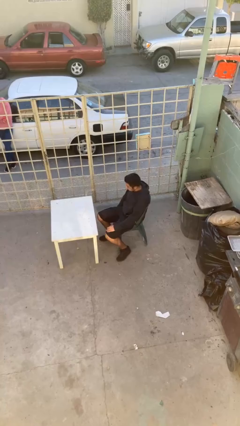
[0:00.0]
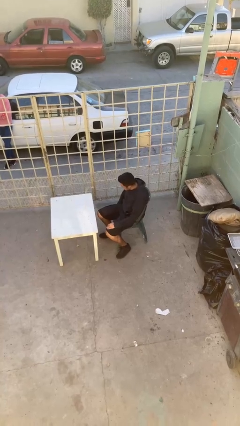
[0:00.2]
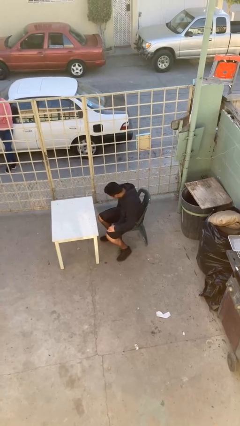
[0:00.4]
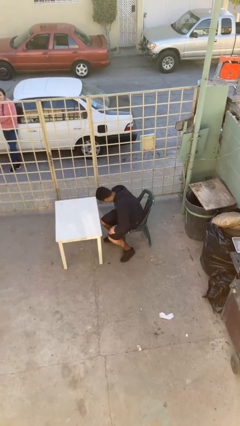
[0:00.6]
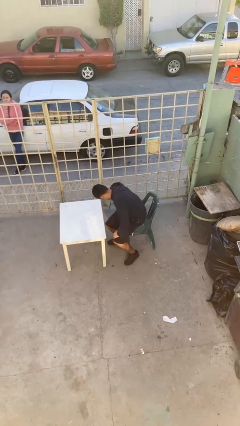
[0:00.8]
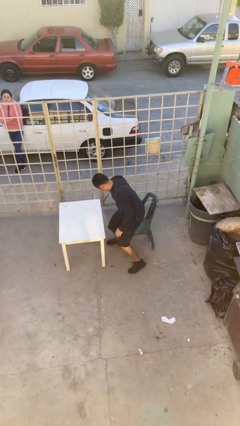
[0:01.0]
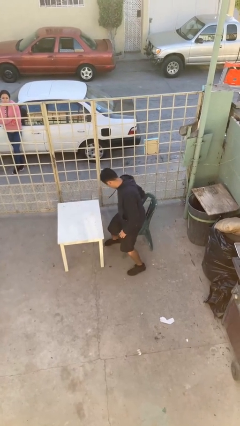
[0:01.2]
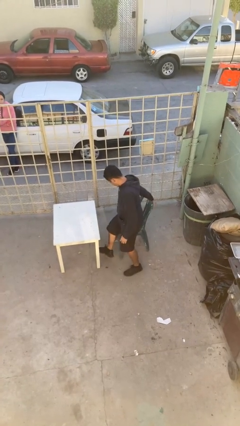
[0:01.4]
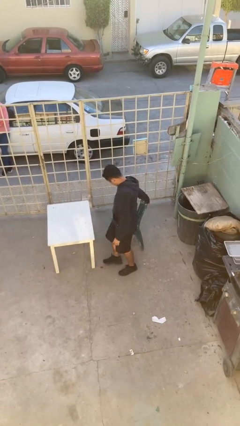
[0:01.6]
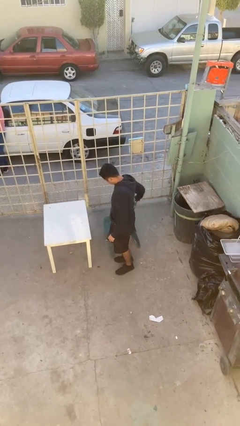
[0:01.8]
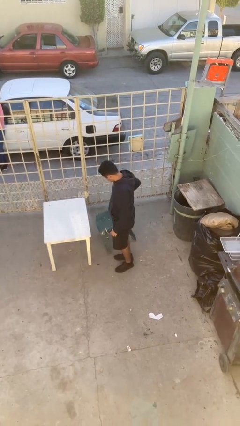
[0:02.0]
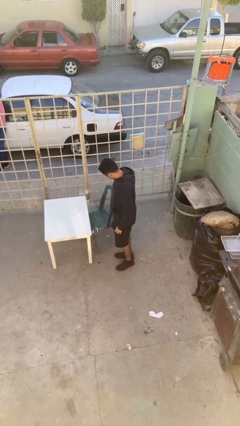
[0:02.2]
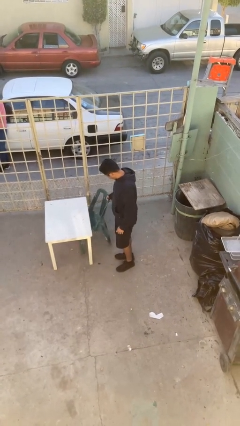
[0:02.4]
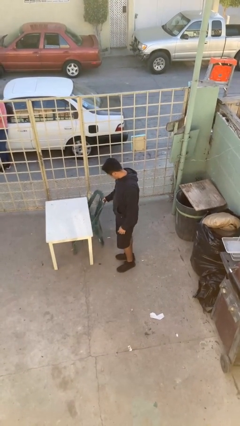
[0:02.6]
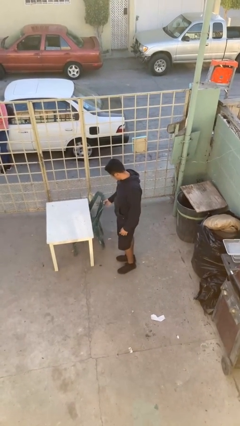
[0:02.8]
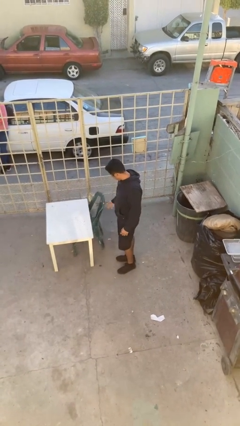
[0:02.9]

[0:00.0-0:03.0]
person stands up

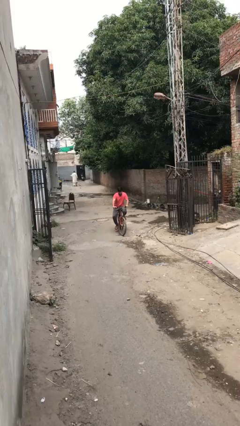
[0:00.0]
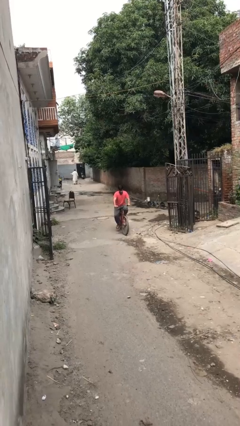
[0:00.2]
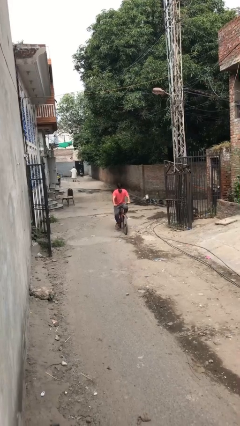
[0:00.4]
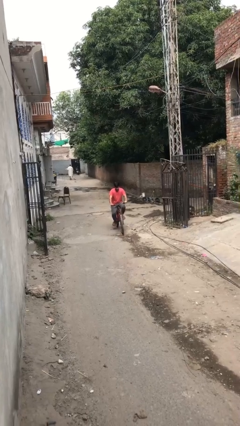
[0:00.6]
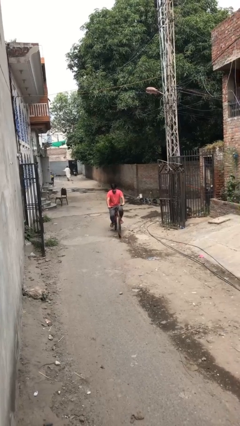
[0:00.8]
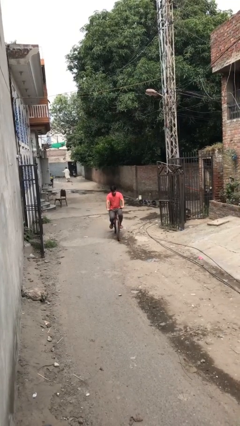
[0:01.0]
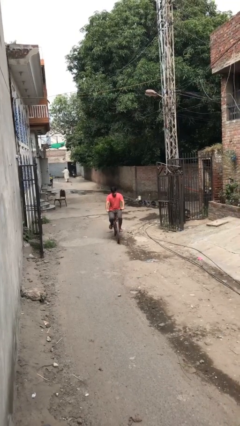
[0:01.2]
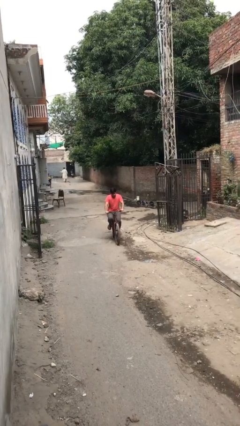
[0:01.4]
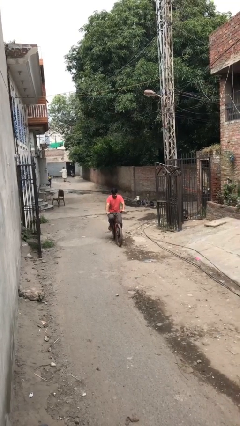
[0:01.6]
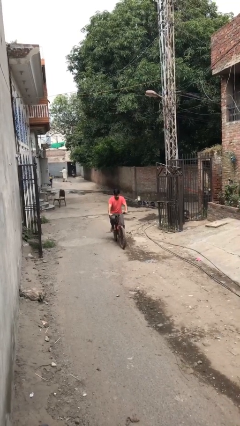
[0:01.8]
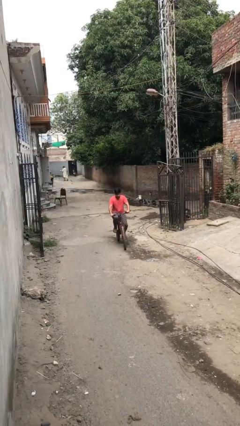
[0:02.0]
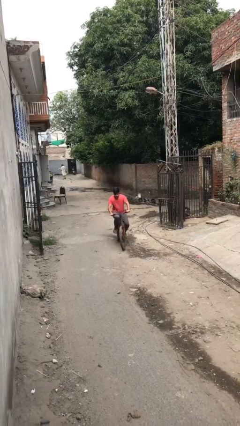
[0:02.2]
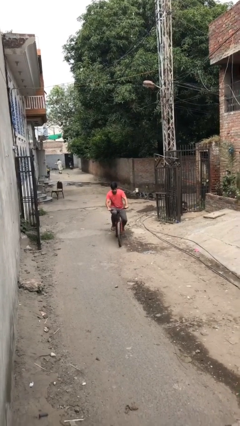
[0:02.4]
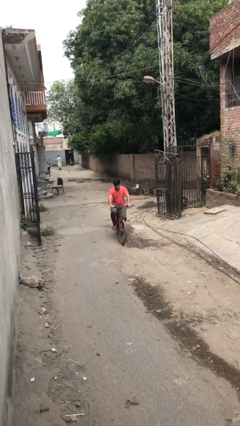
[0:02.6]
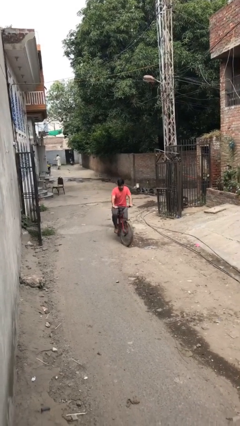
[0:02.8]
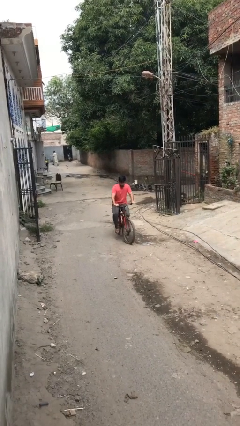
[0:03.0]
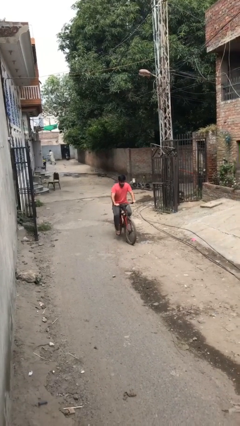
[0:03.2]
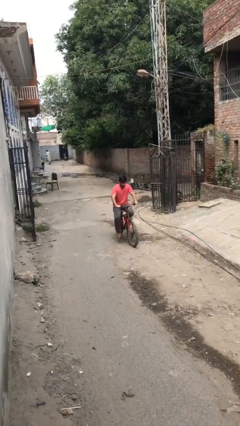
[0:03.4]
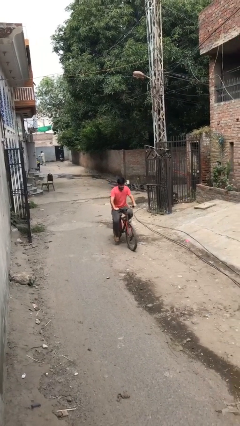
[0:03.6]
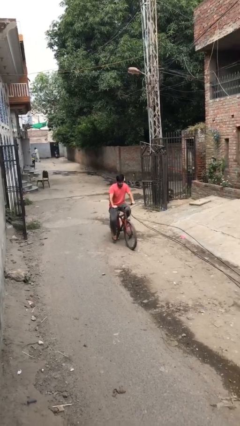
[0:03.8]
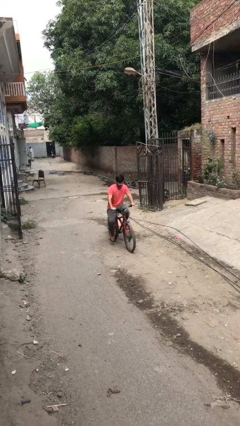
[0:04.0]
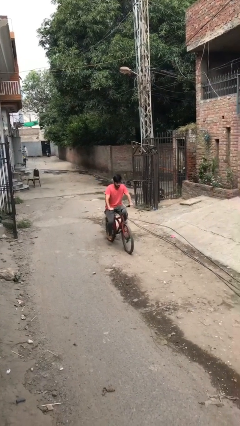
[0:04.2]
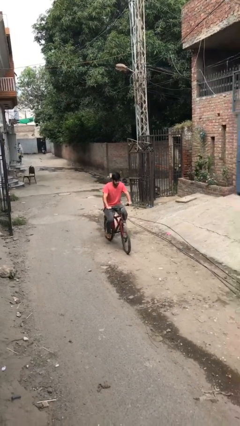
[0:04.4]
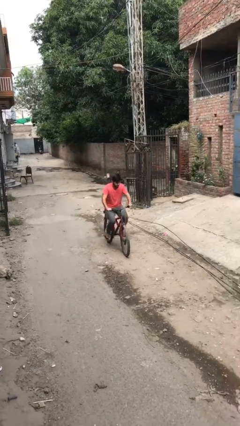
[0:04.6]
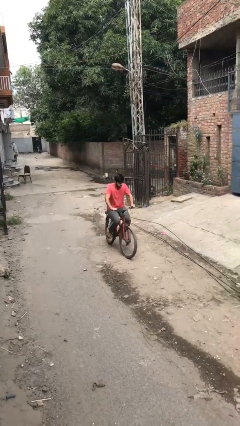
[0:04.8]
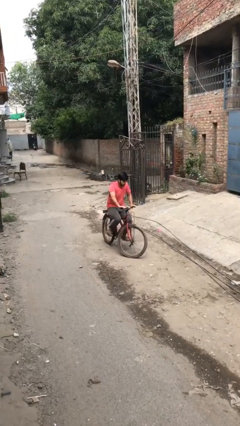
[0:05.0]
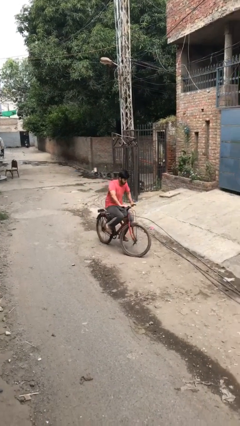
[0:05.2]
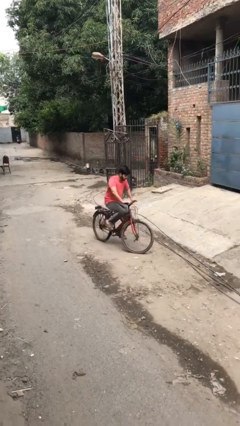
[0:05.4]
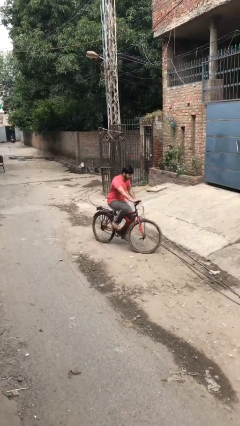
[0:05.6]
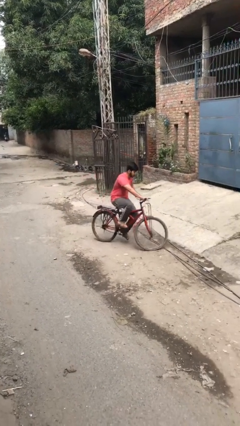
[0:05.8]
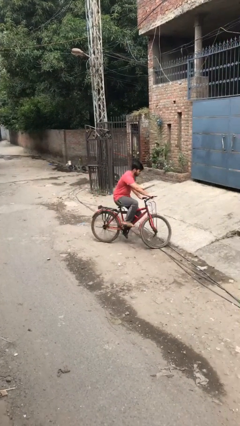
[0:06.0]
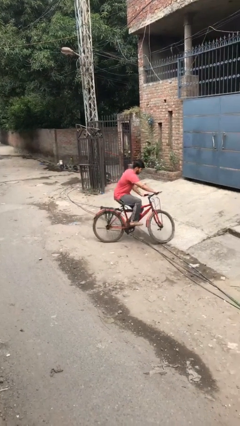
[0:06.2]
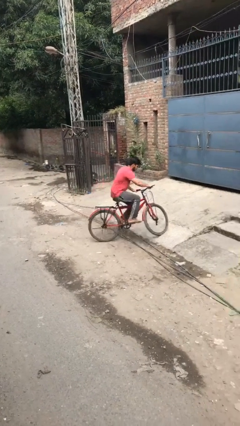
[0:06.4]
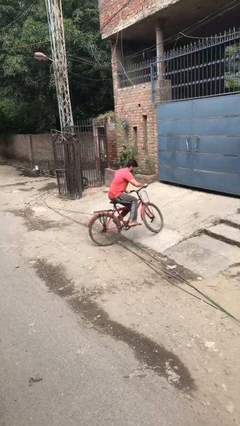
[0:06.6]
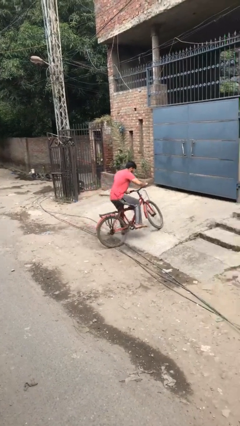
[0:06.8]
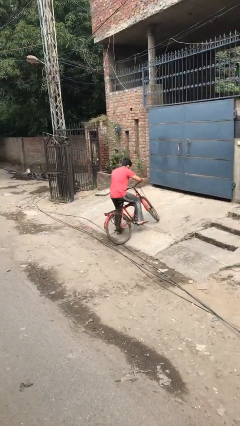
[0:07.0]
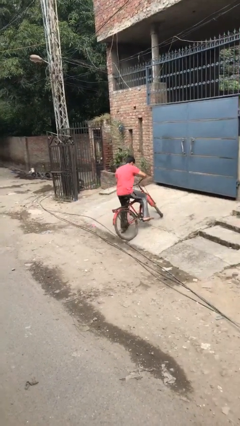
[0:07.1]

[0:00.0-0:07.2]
person rides bicycle

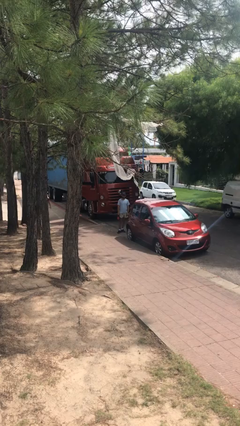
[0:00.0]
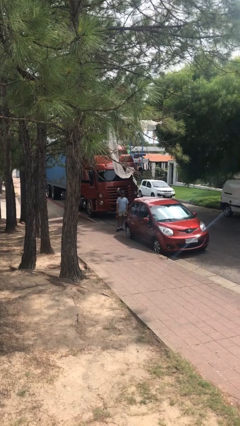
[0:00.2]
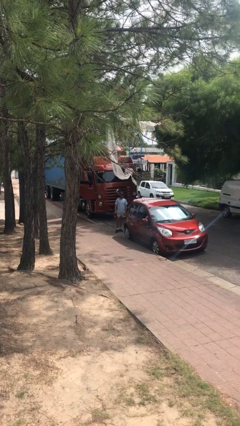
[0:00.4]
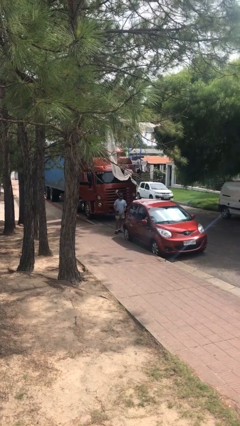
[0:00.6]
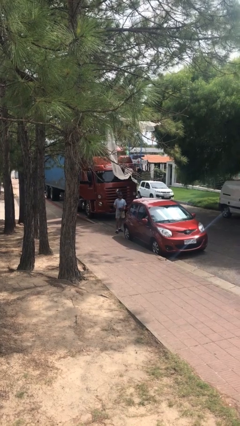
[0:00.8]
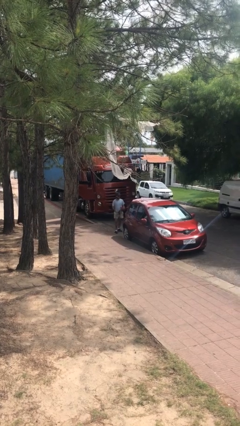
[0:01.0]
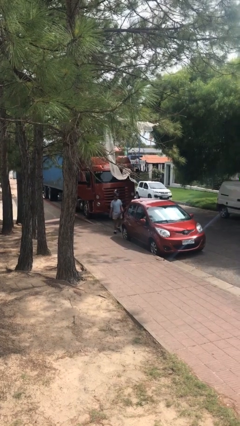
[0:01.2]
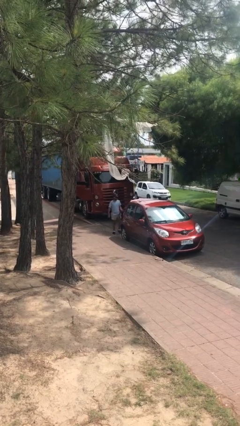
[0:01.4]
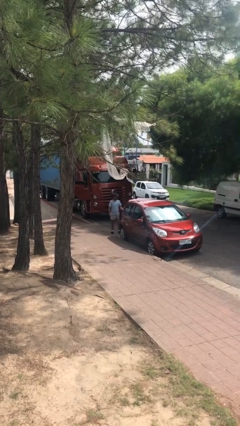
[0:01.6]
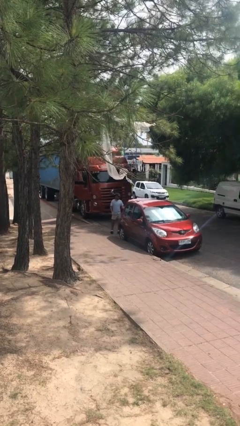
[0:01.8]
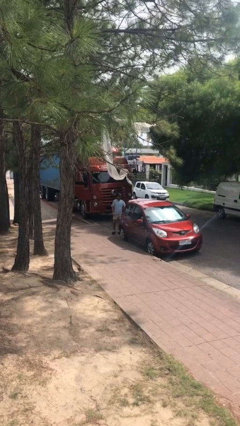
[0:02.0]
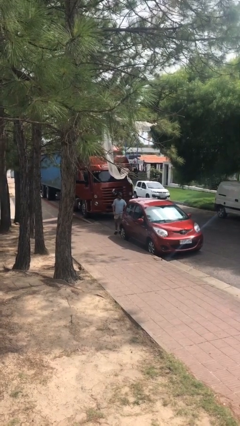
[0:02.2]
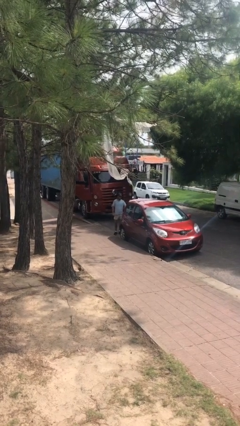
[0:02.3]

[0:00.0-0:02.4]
person loads car

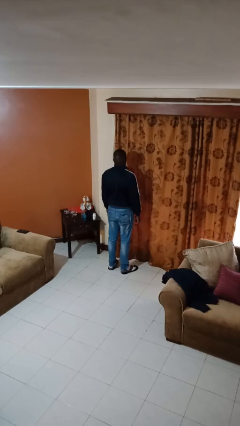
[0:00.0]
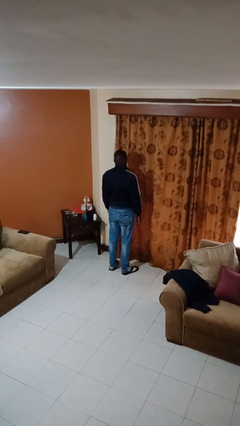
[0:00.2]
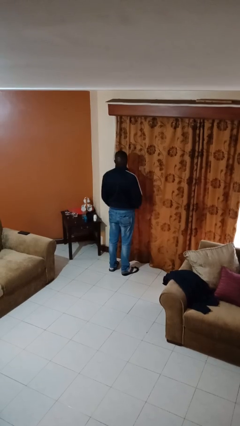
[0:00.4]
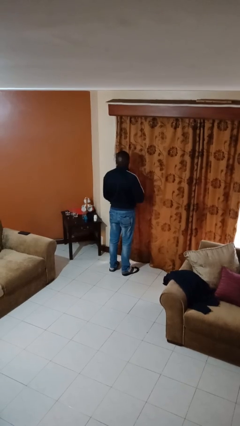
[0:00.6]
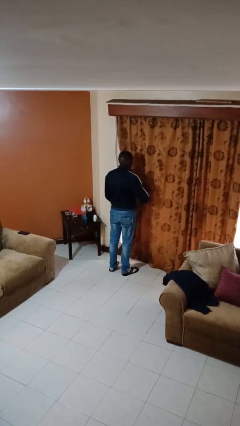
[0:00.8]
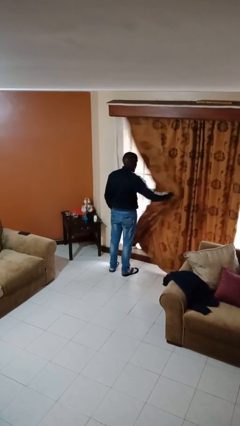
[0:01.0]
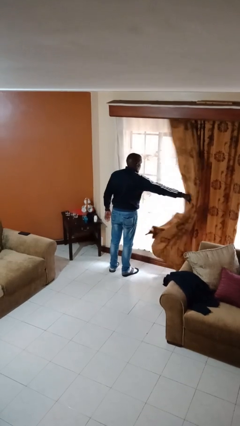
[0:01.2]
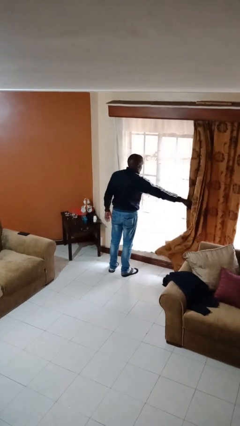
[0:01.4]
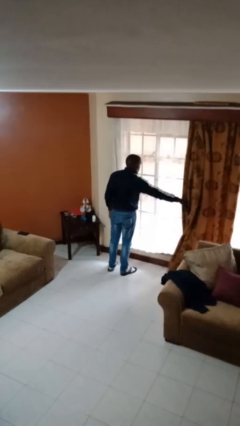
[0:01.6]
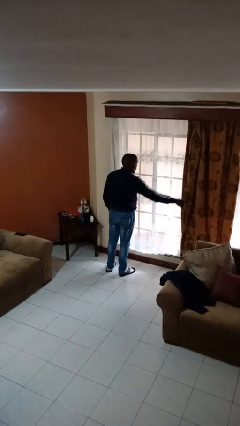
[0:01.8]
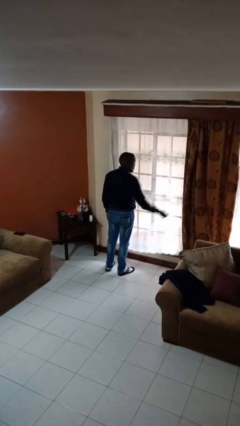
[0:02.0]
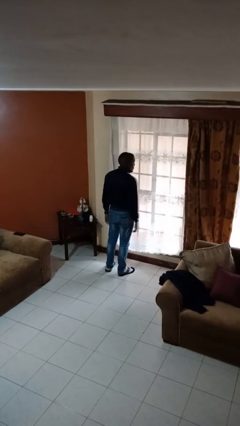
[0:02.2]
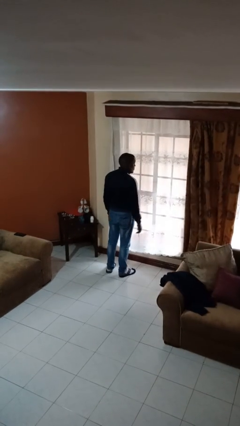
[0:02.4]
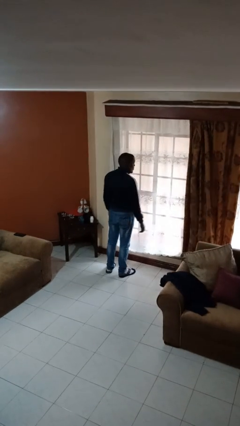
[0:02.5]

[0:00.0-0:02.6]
person opens curtains

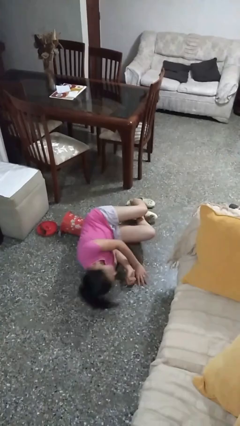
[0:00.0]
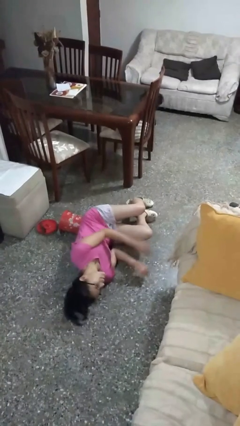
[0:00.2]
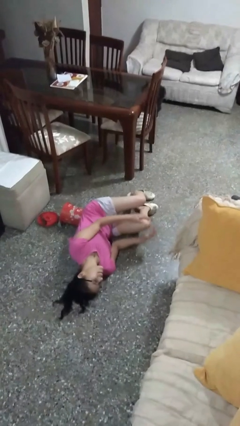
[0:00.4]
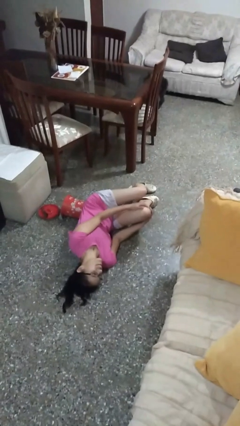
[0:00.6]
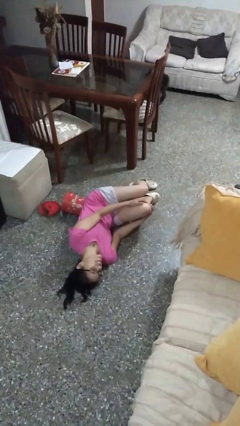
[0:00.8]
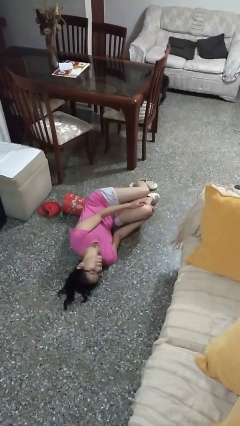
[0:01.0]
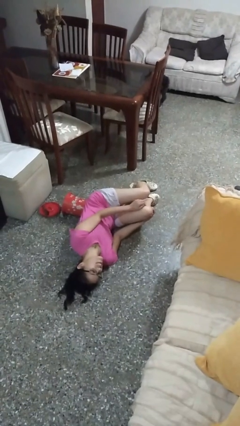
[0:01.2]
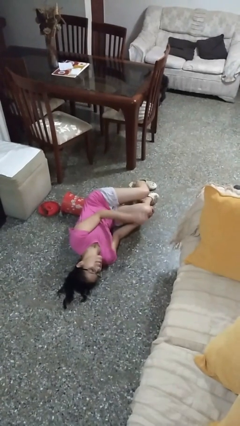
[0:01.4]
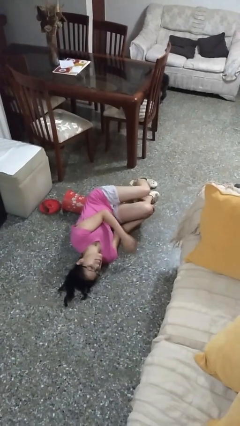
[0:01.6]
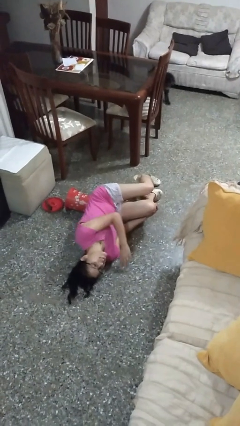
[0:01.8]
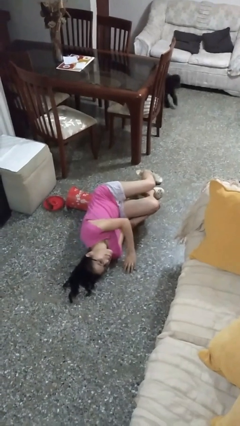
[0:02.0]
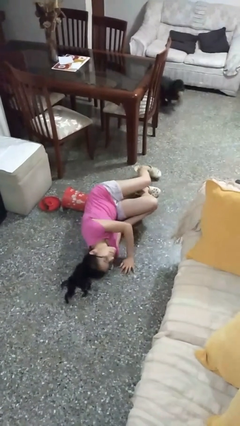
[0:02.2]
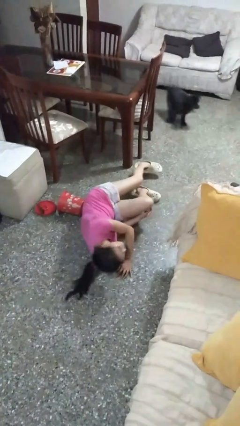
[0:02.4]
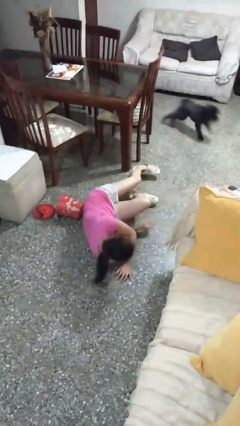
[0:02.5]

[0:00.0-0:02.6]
person lies down on floor
